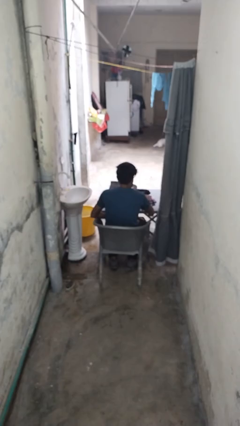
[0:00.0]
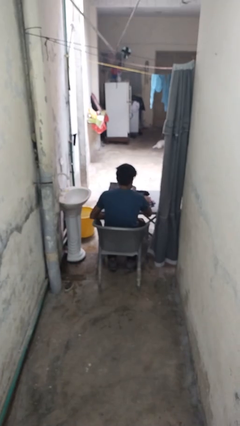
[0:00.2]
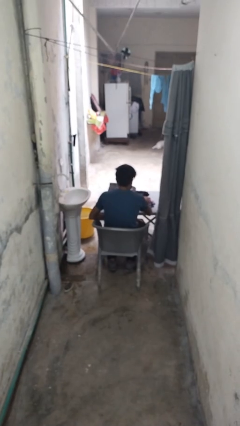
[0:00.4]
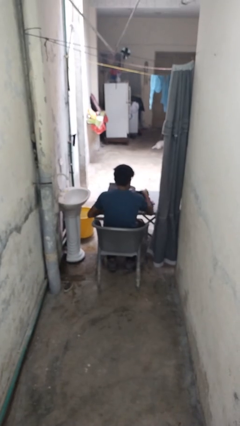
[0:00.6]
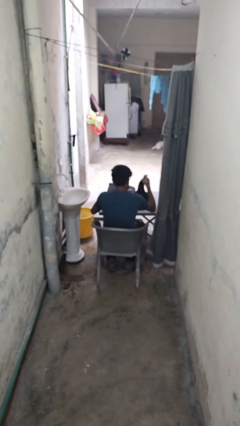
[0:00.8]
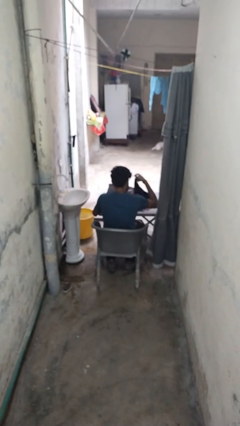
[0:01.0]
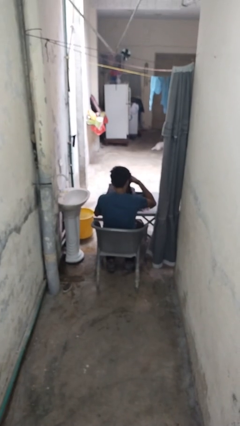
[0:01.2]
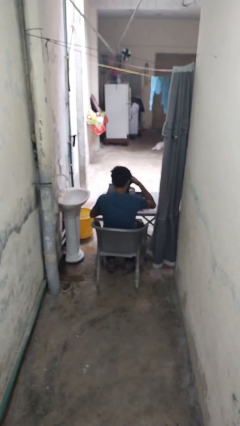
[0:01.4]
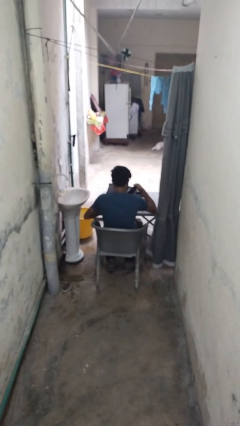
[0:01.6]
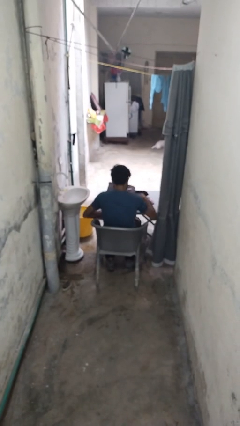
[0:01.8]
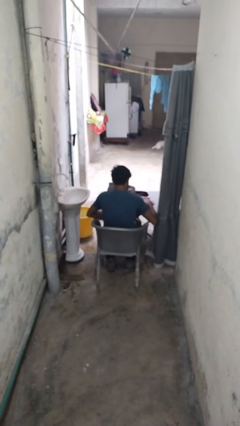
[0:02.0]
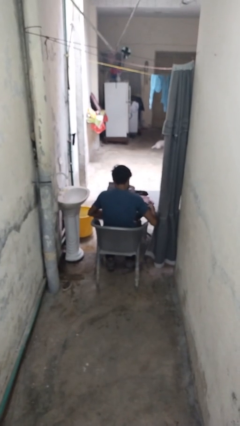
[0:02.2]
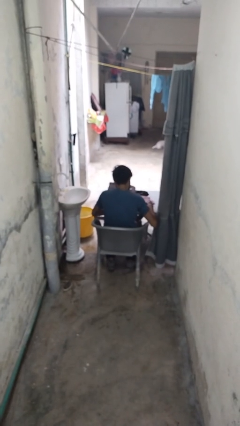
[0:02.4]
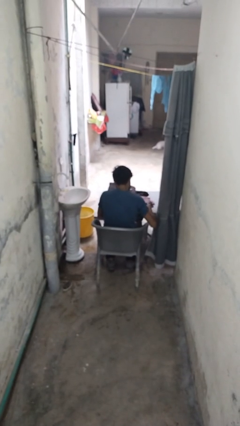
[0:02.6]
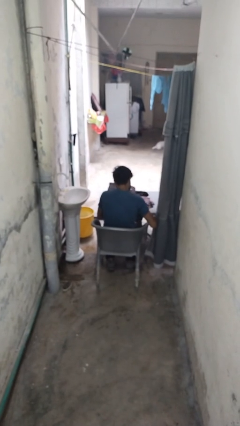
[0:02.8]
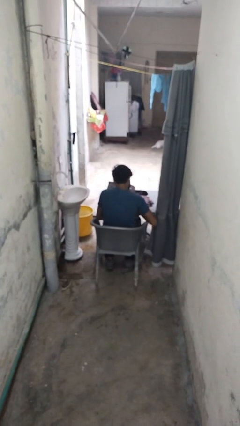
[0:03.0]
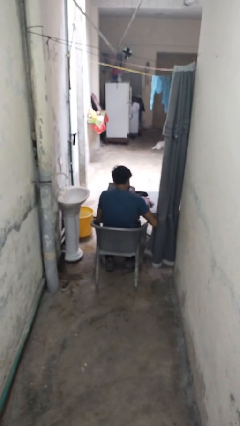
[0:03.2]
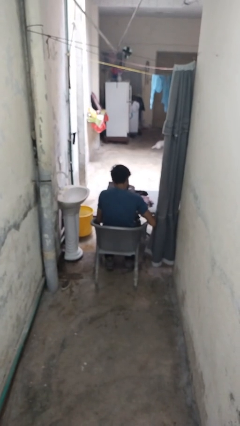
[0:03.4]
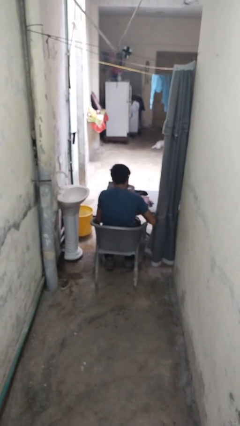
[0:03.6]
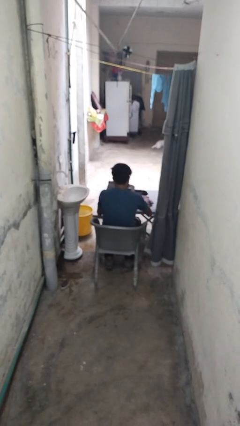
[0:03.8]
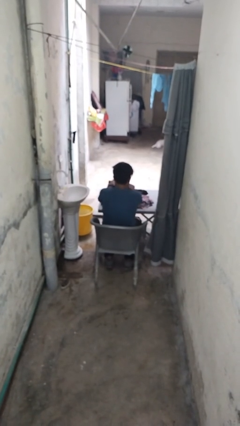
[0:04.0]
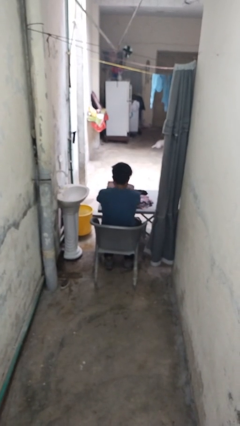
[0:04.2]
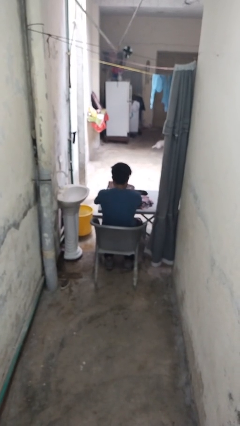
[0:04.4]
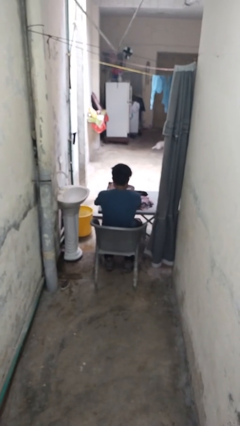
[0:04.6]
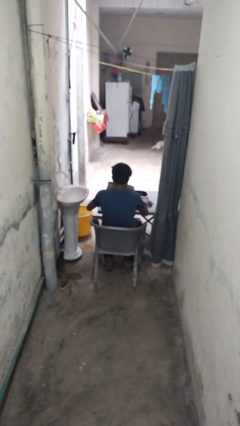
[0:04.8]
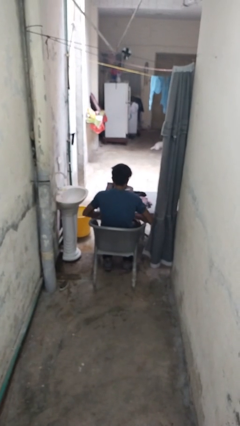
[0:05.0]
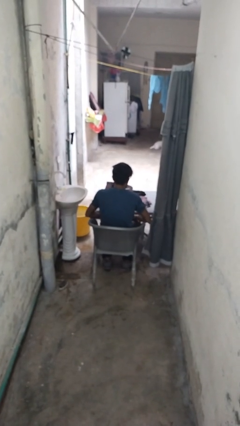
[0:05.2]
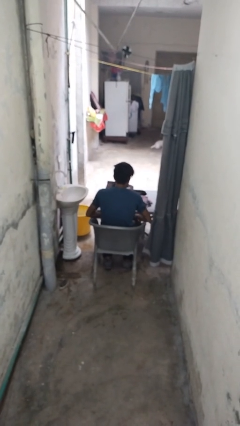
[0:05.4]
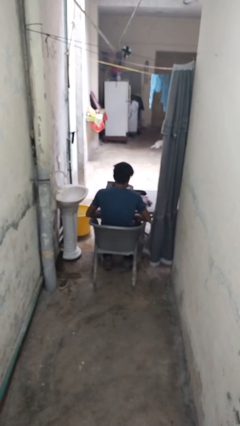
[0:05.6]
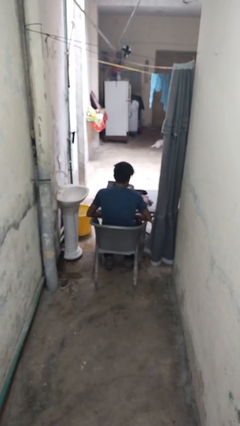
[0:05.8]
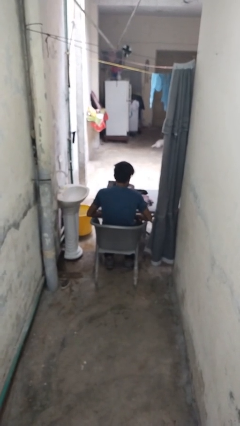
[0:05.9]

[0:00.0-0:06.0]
person folds socks

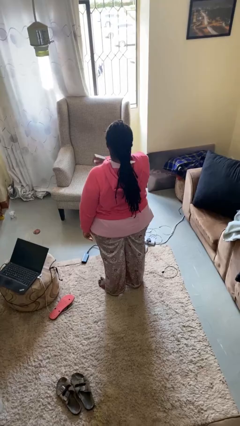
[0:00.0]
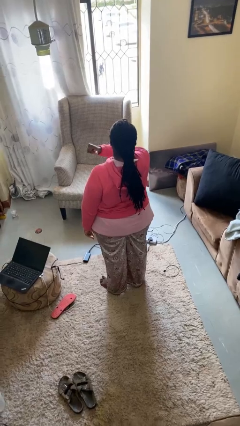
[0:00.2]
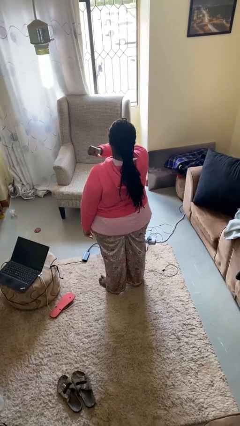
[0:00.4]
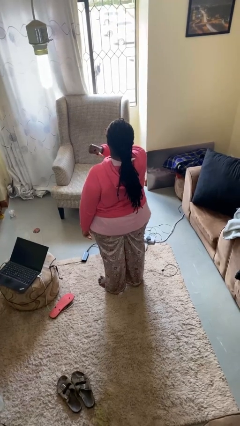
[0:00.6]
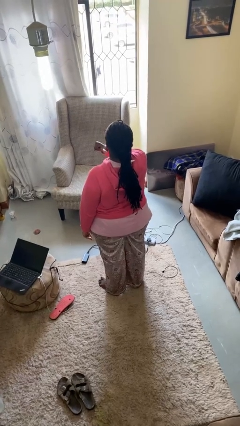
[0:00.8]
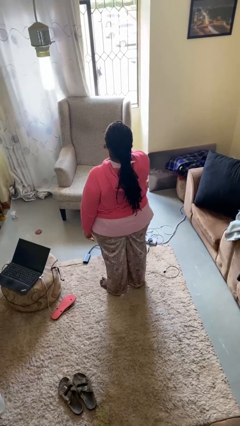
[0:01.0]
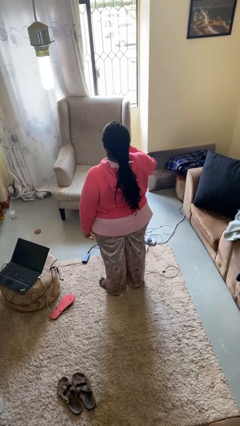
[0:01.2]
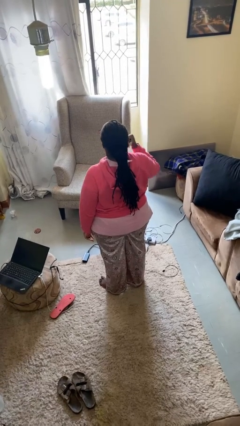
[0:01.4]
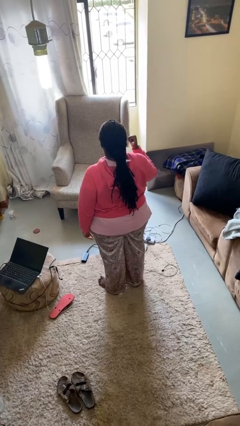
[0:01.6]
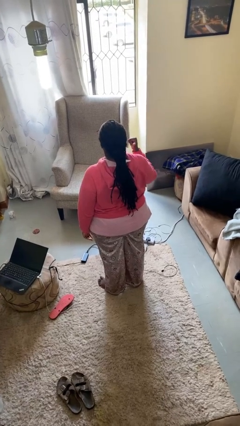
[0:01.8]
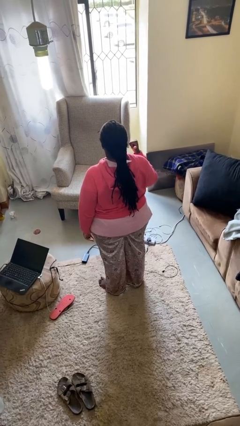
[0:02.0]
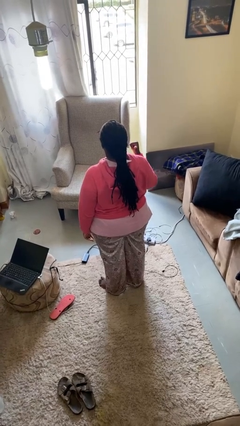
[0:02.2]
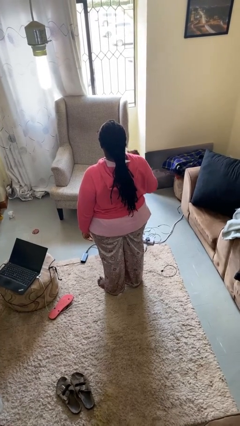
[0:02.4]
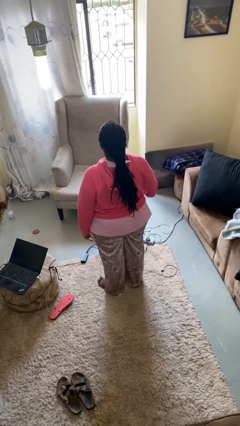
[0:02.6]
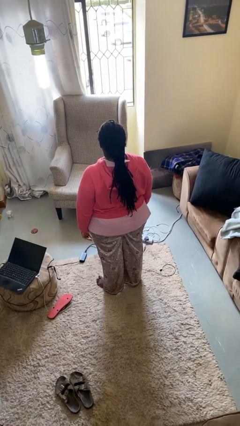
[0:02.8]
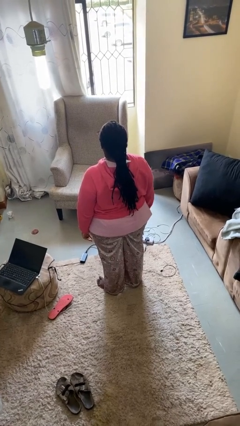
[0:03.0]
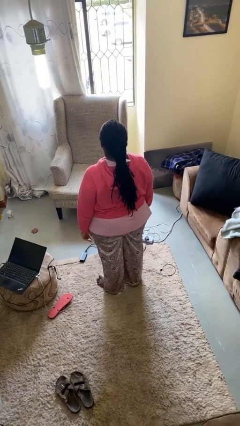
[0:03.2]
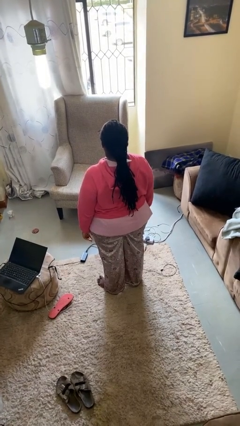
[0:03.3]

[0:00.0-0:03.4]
person gestures cut

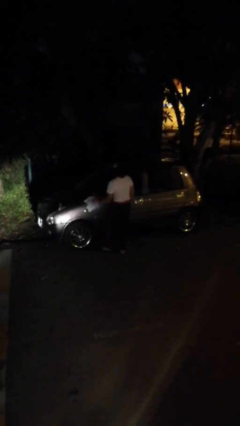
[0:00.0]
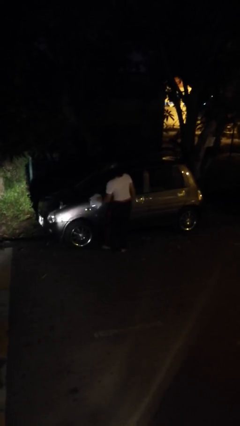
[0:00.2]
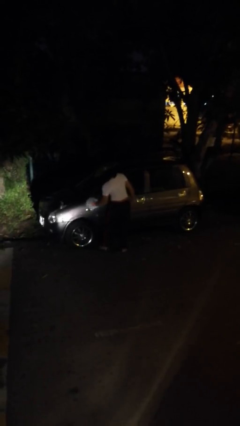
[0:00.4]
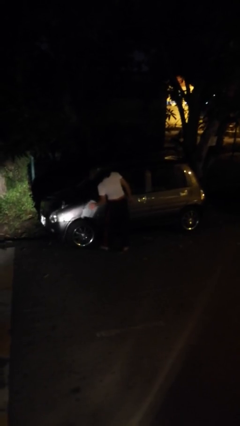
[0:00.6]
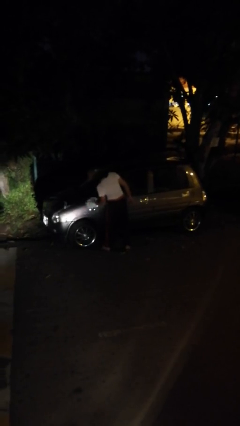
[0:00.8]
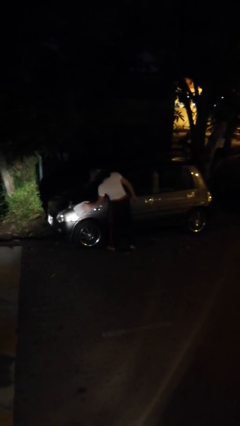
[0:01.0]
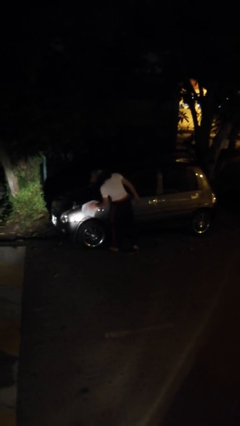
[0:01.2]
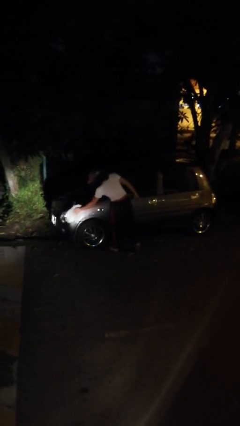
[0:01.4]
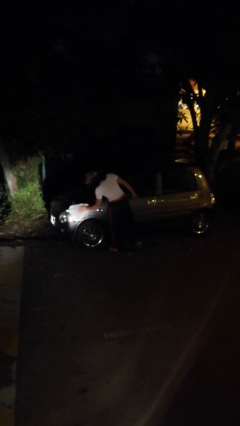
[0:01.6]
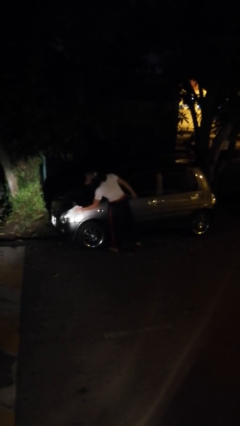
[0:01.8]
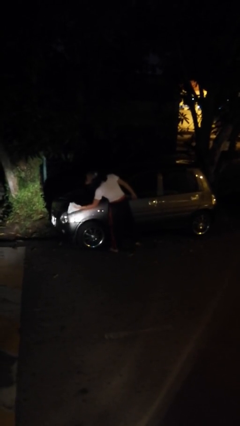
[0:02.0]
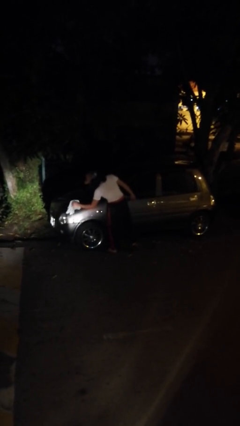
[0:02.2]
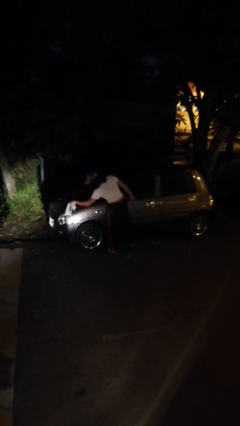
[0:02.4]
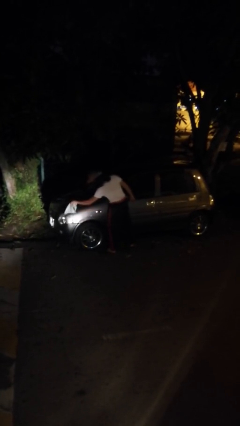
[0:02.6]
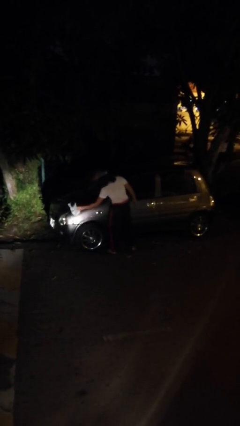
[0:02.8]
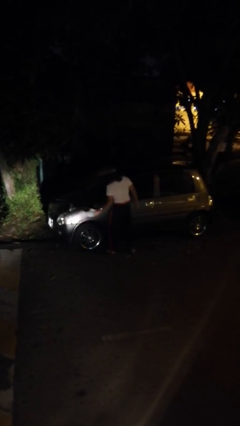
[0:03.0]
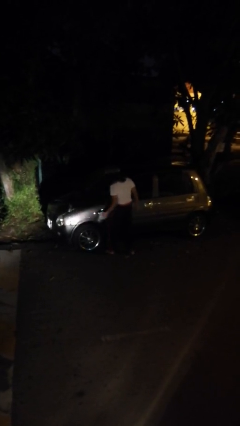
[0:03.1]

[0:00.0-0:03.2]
person polishes car with rag

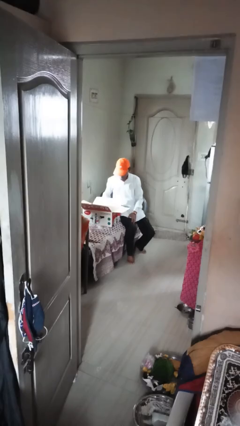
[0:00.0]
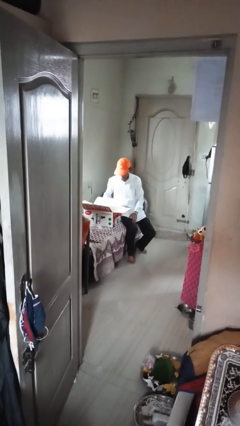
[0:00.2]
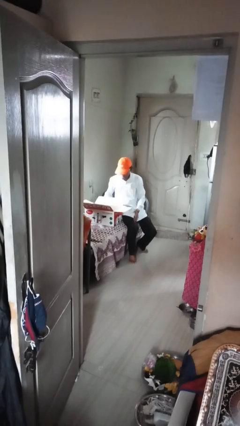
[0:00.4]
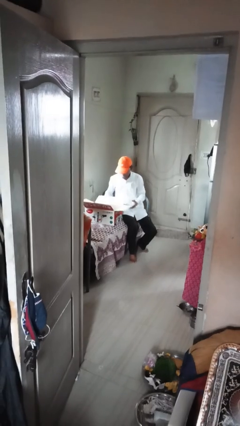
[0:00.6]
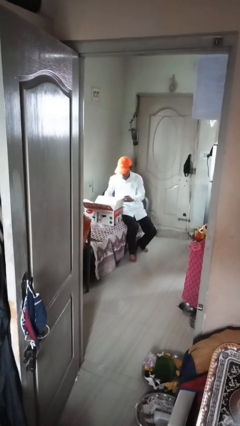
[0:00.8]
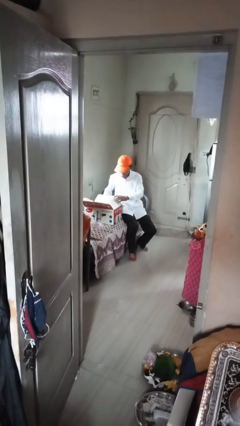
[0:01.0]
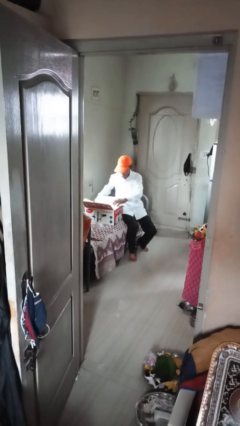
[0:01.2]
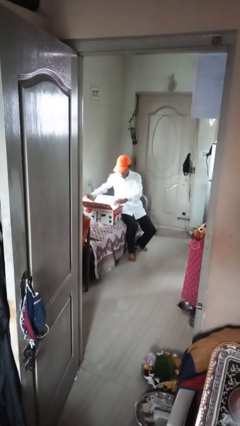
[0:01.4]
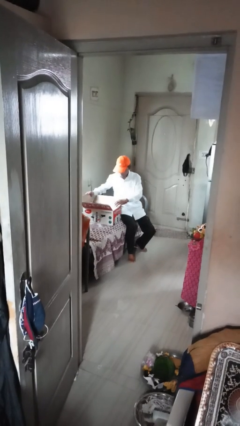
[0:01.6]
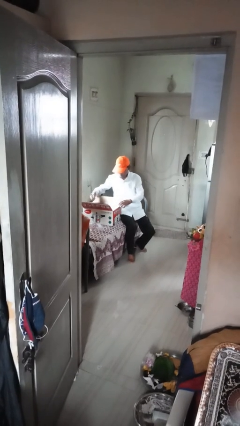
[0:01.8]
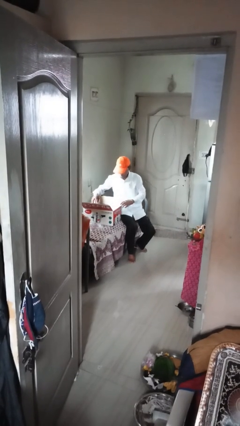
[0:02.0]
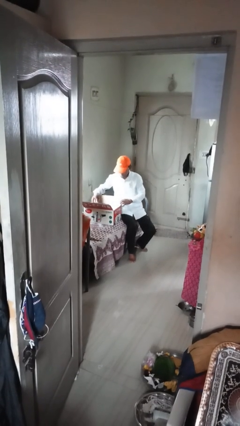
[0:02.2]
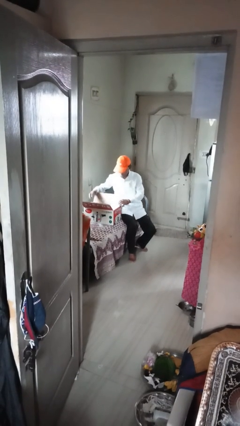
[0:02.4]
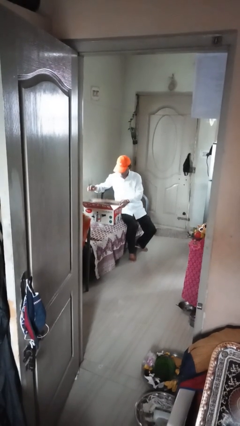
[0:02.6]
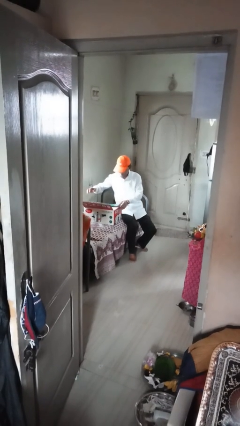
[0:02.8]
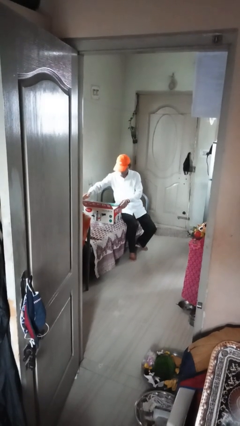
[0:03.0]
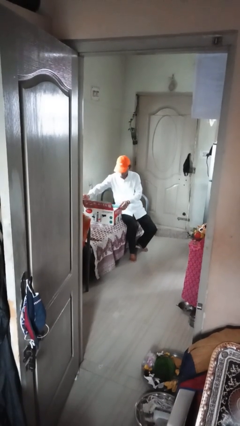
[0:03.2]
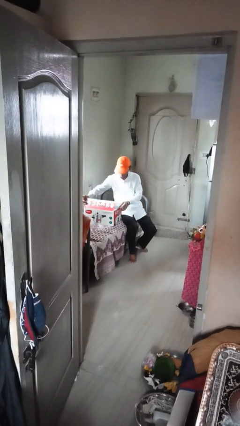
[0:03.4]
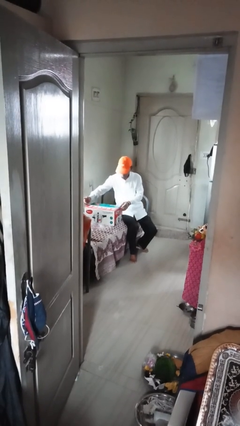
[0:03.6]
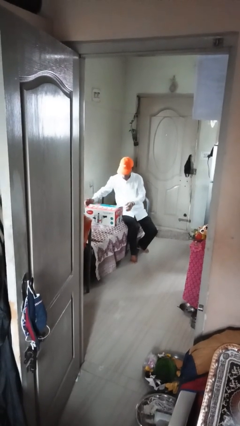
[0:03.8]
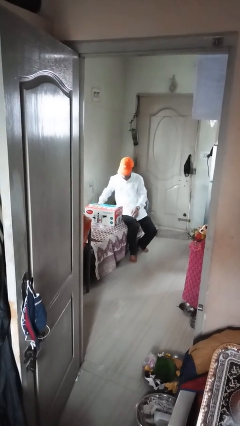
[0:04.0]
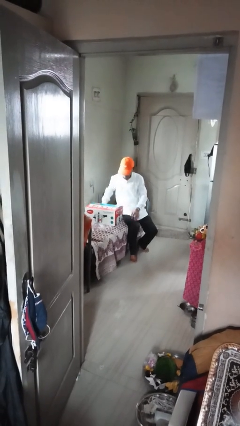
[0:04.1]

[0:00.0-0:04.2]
person closes box

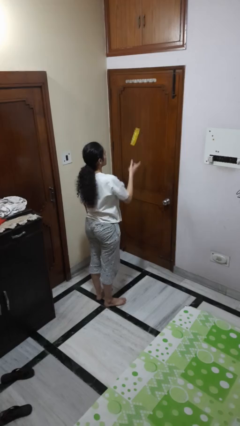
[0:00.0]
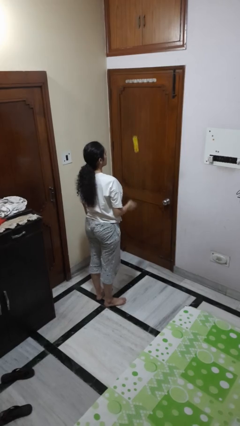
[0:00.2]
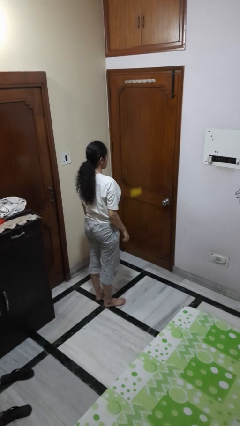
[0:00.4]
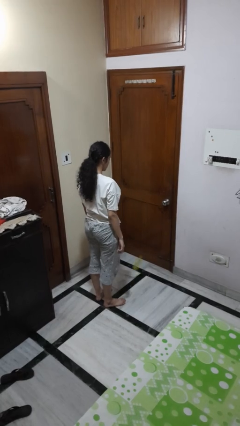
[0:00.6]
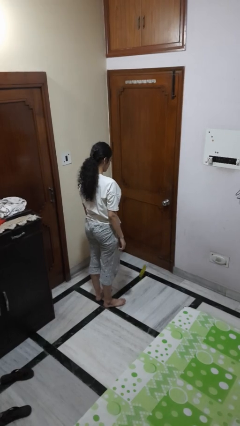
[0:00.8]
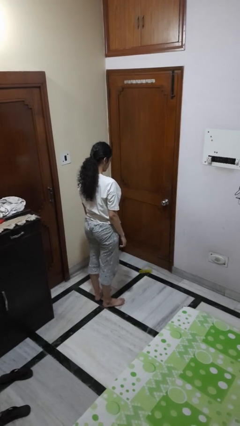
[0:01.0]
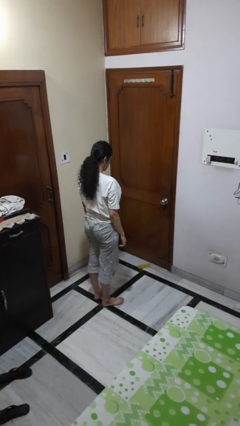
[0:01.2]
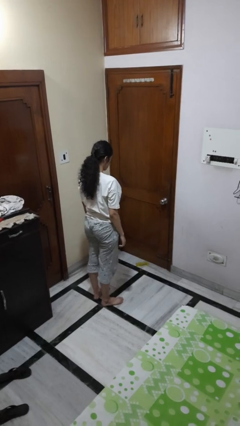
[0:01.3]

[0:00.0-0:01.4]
person throws object into air
